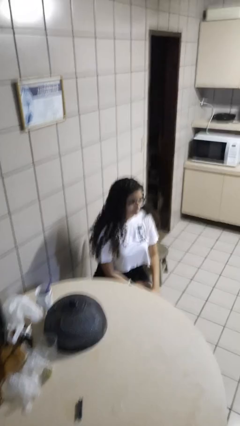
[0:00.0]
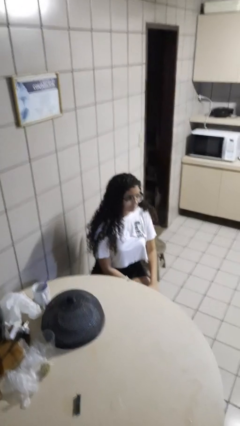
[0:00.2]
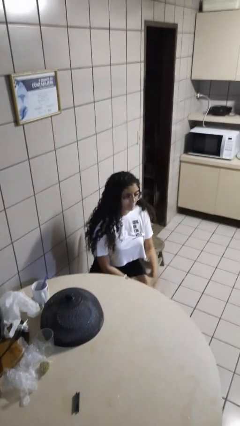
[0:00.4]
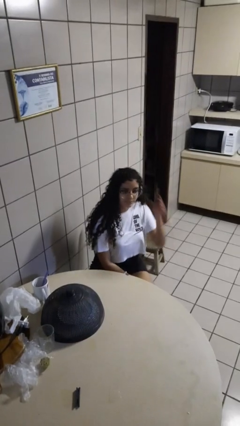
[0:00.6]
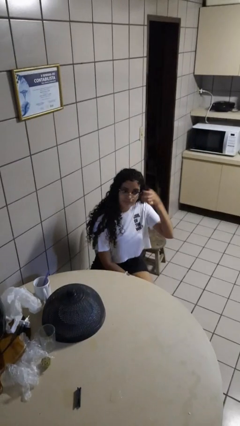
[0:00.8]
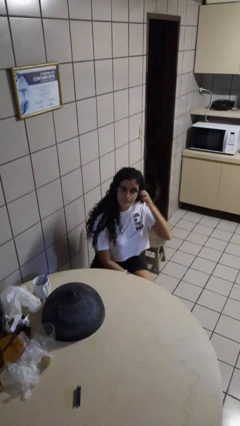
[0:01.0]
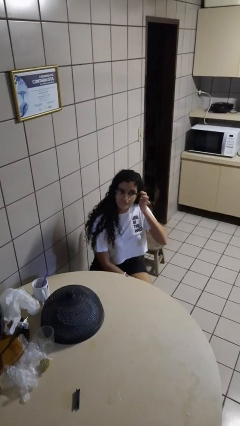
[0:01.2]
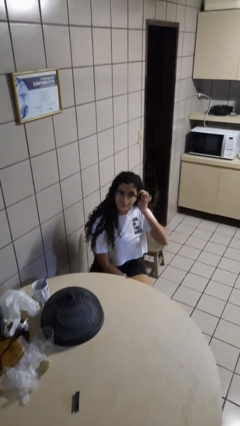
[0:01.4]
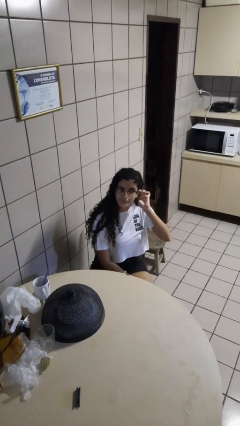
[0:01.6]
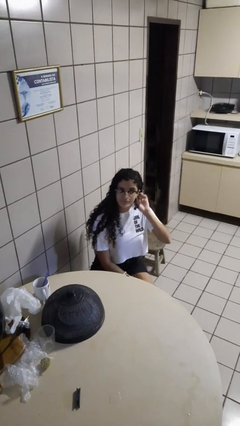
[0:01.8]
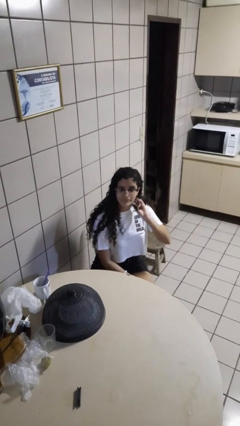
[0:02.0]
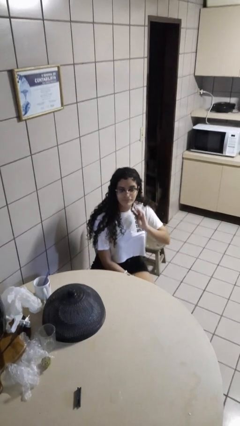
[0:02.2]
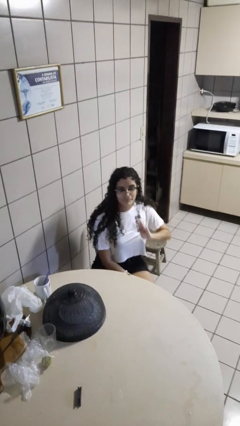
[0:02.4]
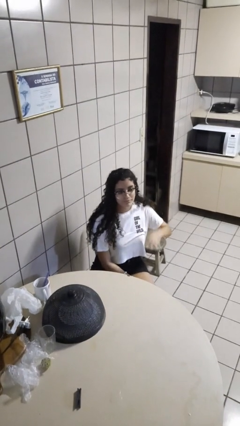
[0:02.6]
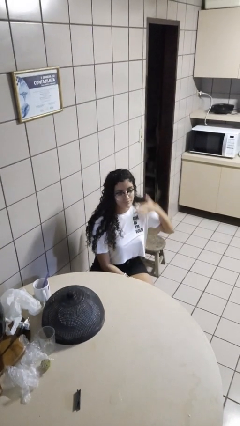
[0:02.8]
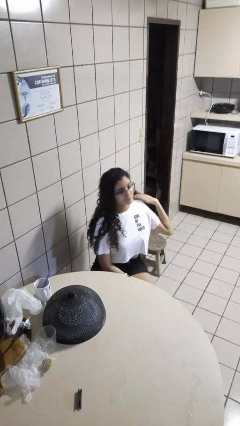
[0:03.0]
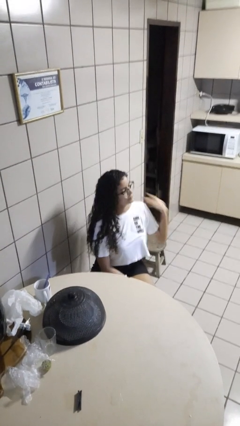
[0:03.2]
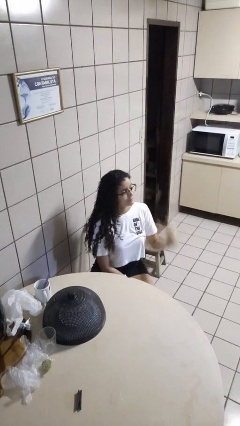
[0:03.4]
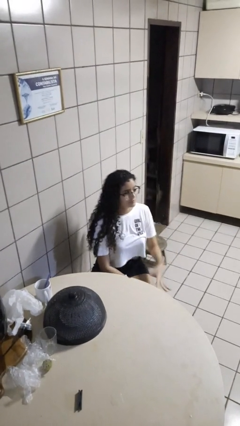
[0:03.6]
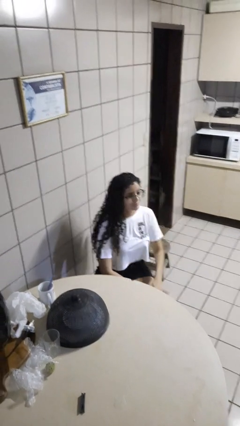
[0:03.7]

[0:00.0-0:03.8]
person strokes hair

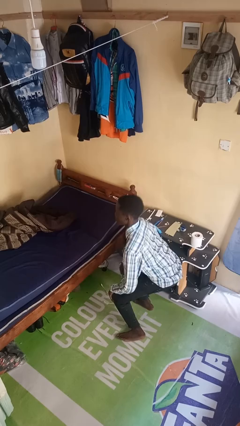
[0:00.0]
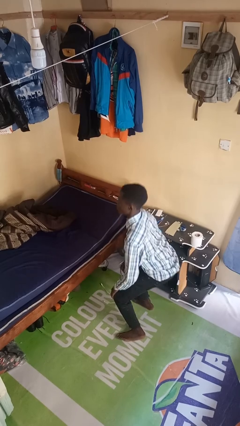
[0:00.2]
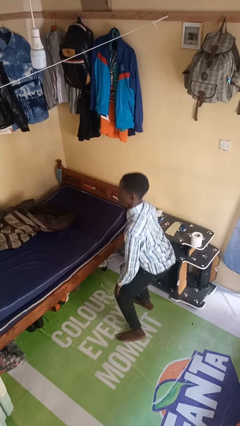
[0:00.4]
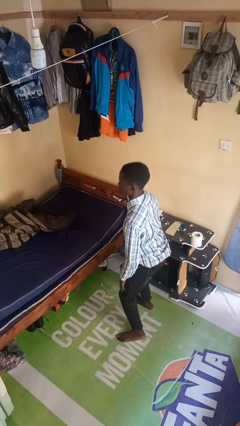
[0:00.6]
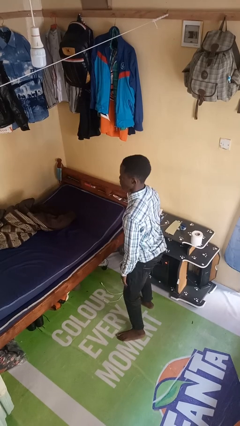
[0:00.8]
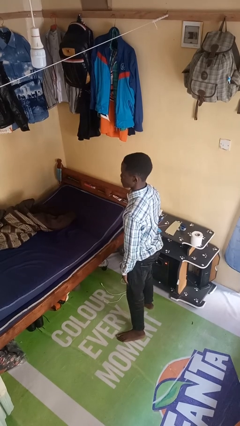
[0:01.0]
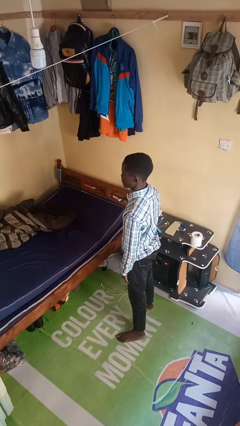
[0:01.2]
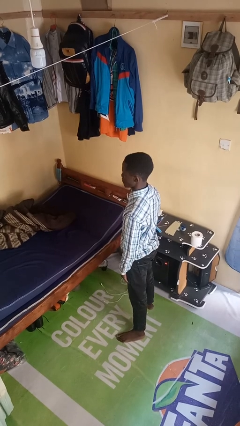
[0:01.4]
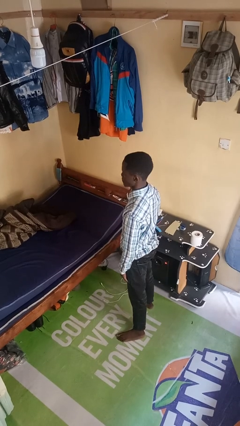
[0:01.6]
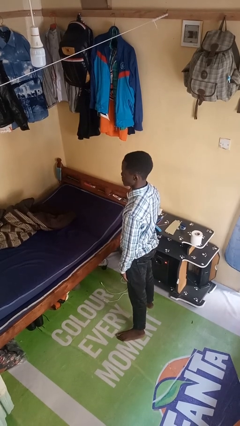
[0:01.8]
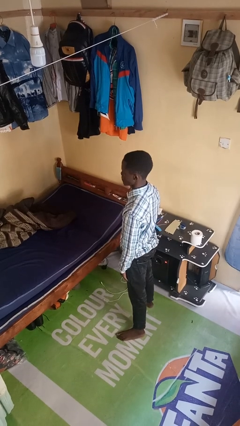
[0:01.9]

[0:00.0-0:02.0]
person stands up

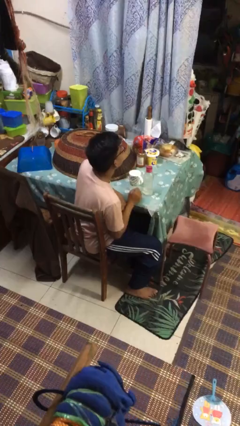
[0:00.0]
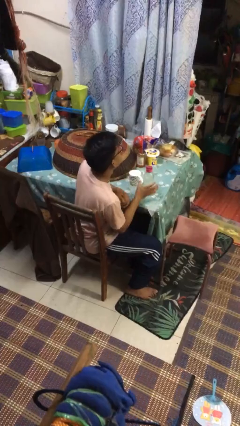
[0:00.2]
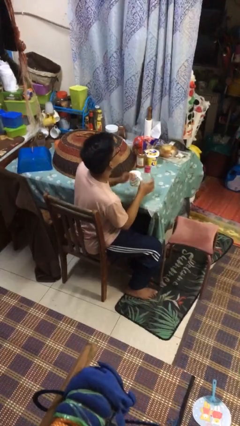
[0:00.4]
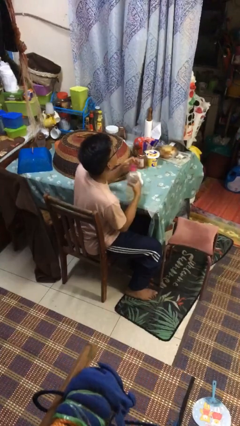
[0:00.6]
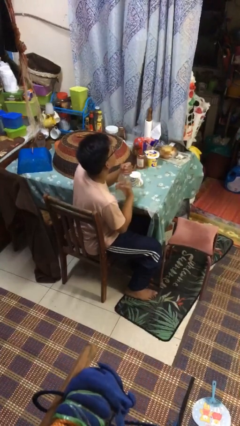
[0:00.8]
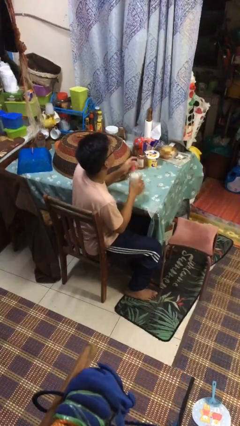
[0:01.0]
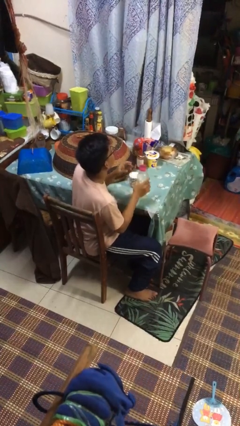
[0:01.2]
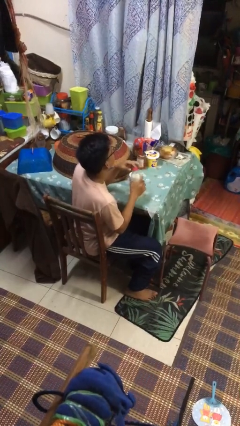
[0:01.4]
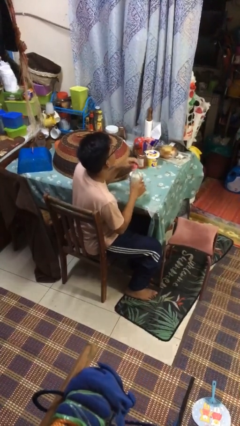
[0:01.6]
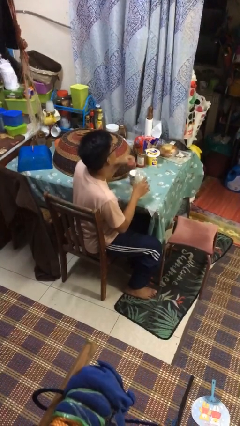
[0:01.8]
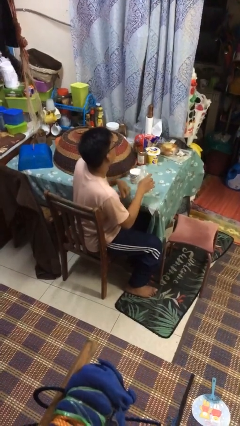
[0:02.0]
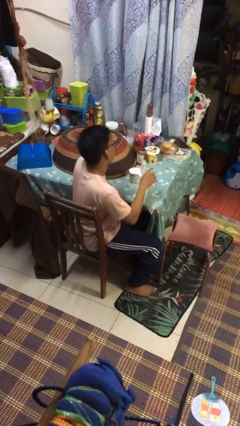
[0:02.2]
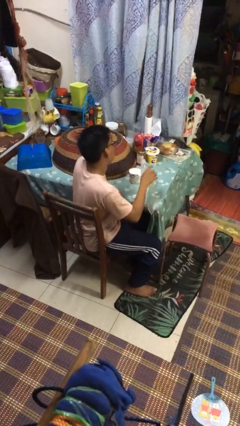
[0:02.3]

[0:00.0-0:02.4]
person unscrews lid from bottle

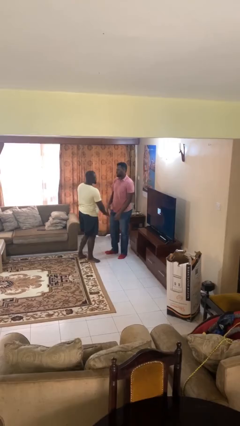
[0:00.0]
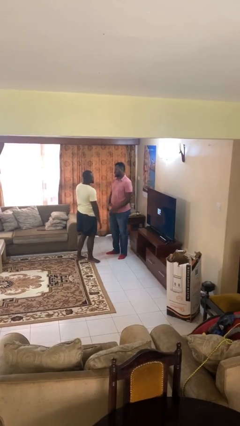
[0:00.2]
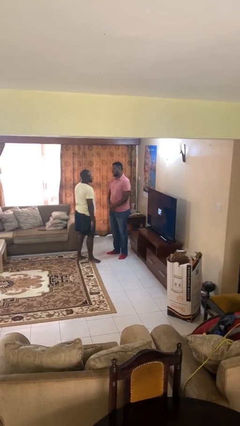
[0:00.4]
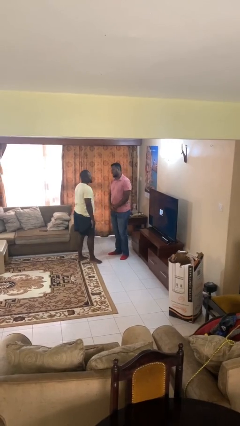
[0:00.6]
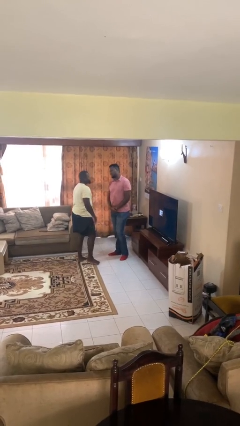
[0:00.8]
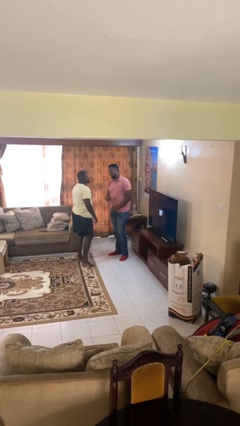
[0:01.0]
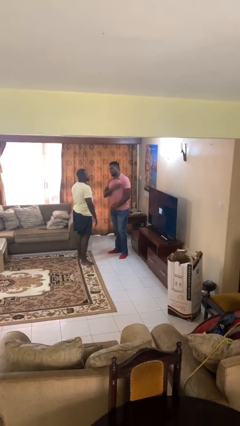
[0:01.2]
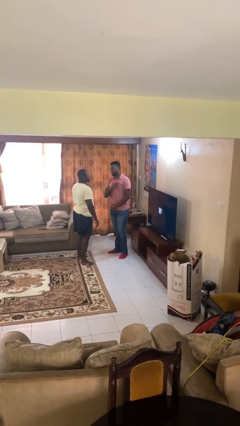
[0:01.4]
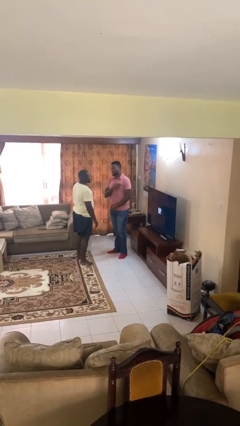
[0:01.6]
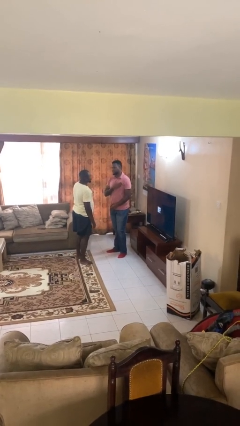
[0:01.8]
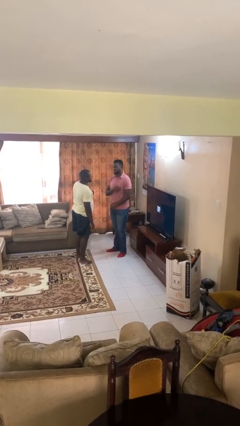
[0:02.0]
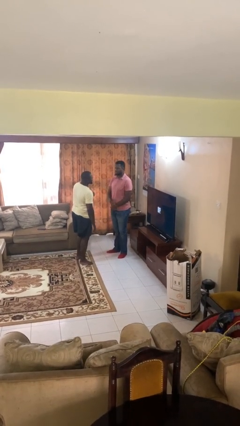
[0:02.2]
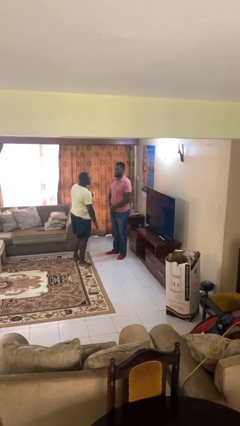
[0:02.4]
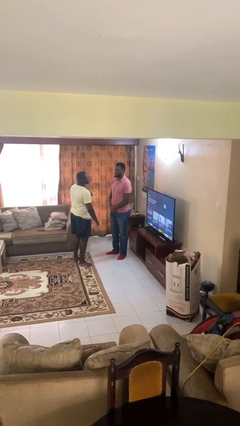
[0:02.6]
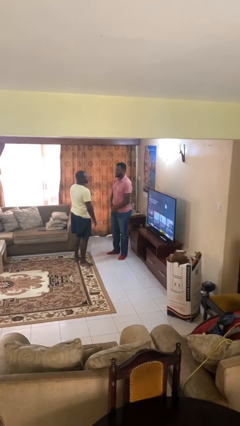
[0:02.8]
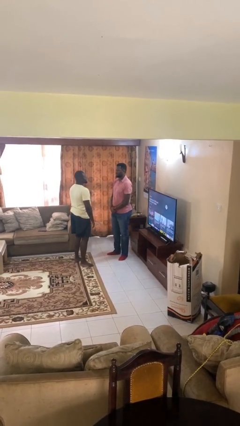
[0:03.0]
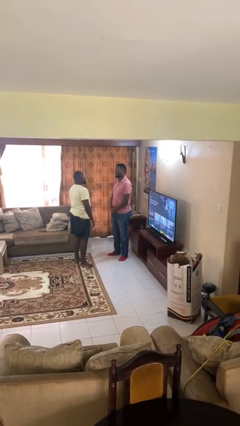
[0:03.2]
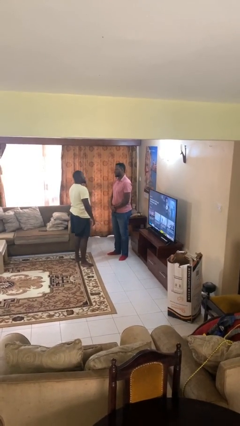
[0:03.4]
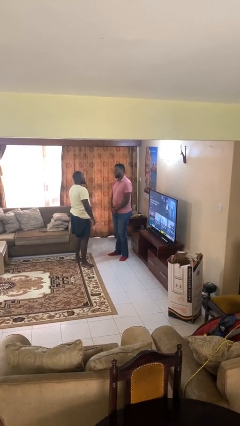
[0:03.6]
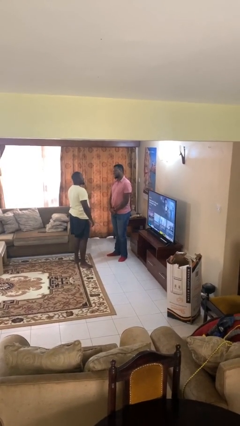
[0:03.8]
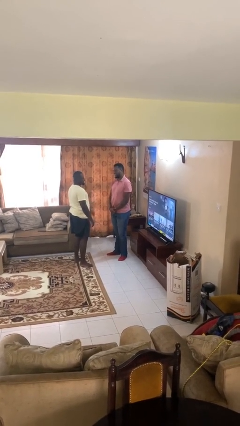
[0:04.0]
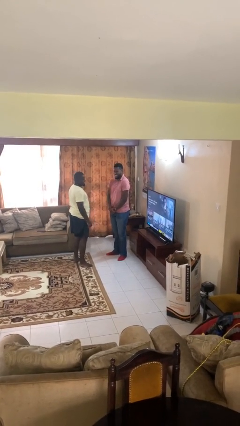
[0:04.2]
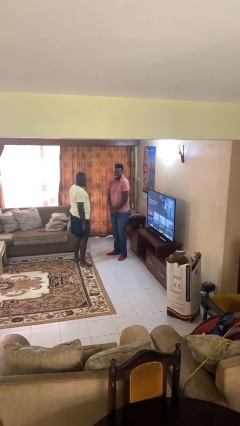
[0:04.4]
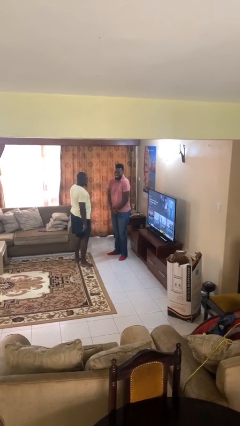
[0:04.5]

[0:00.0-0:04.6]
person talks to person

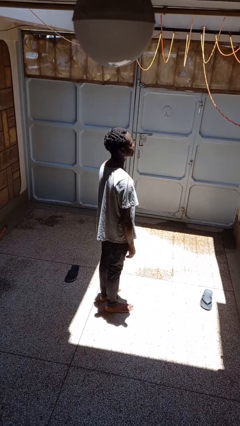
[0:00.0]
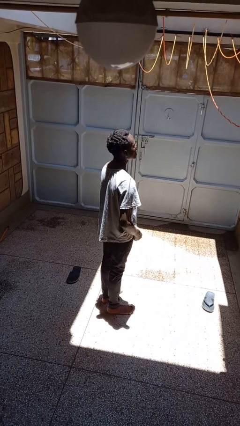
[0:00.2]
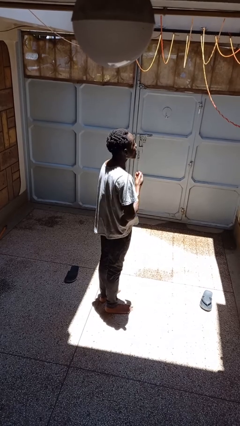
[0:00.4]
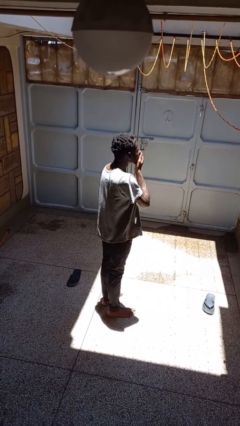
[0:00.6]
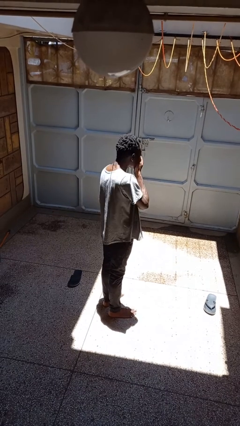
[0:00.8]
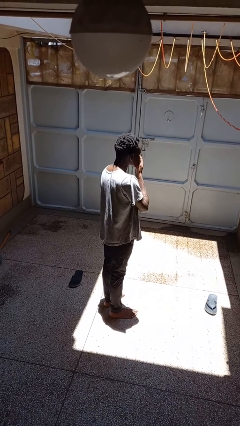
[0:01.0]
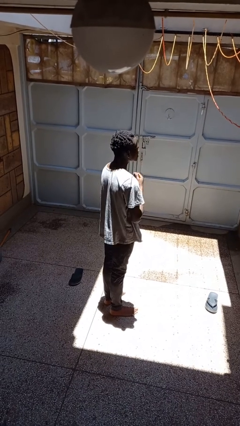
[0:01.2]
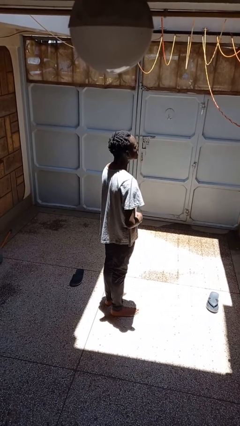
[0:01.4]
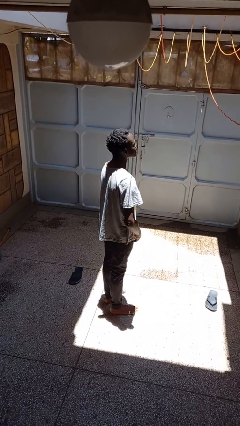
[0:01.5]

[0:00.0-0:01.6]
person sneezes into hand

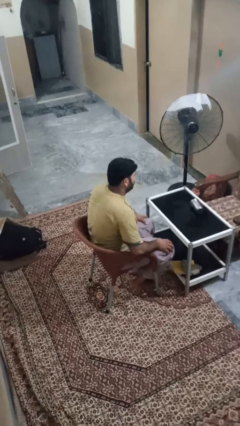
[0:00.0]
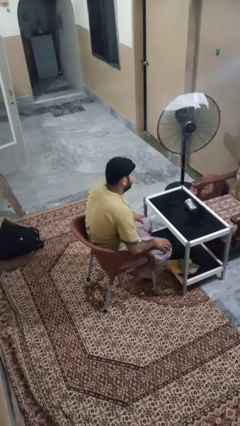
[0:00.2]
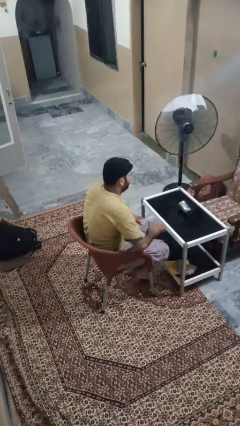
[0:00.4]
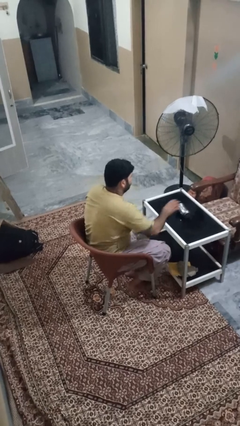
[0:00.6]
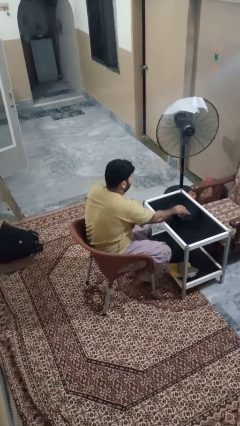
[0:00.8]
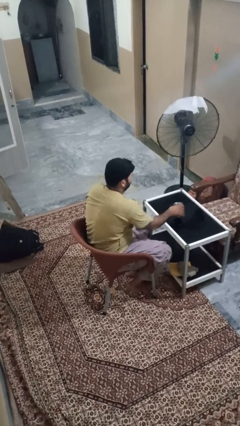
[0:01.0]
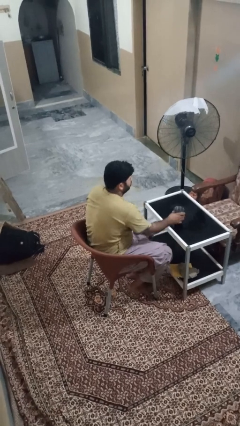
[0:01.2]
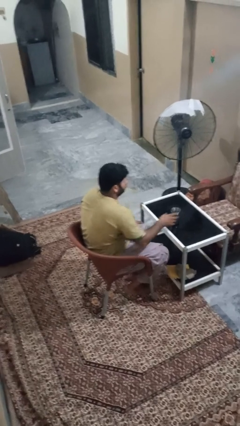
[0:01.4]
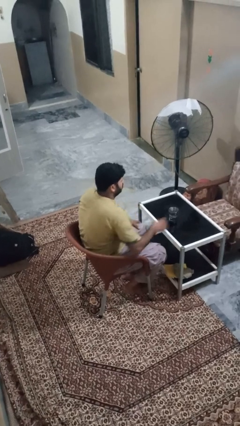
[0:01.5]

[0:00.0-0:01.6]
person sets upright glass

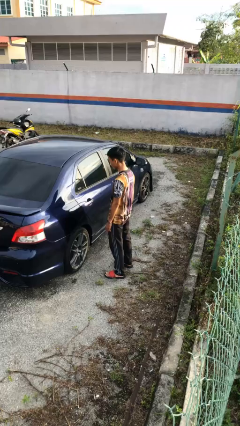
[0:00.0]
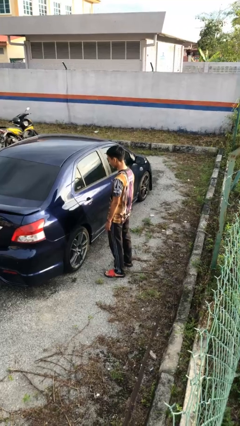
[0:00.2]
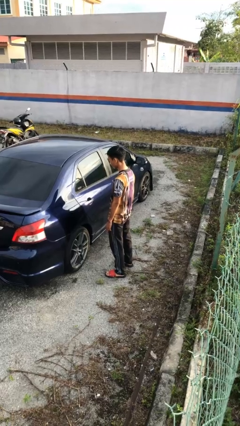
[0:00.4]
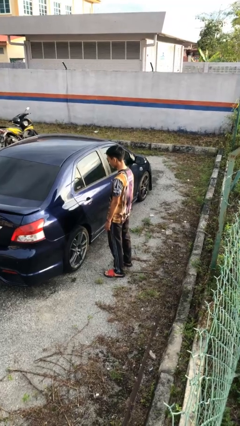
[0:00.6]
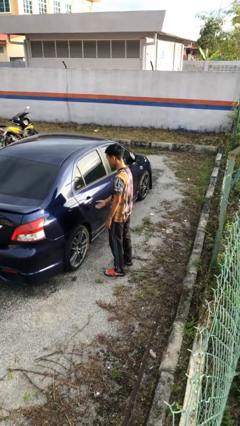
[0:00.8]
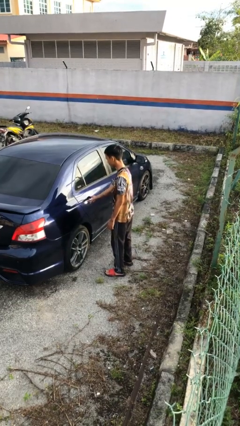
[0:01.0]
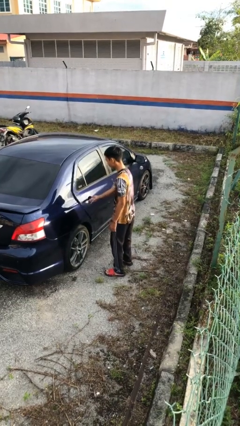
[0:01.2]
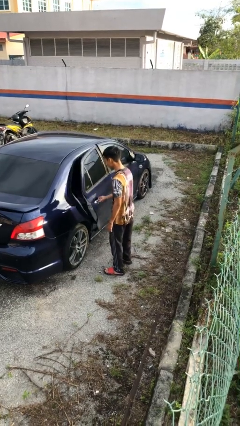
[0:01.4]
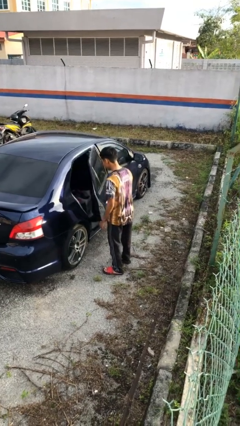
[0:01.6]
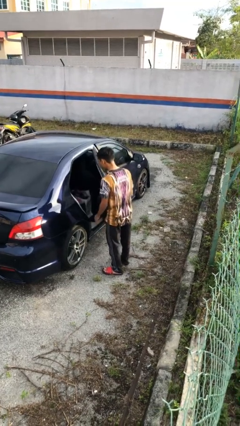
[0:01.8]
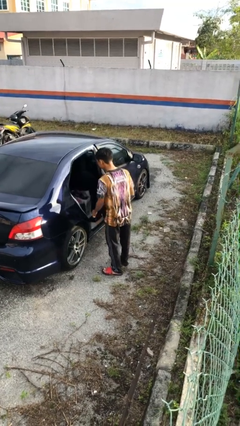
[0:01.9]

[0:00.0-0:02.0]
person opens car door
